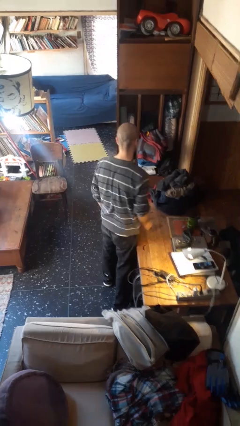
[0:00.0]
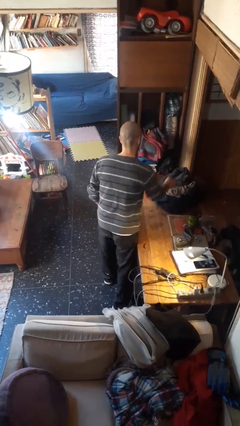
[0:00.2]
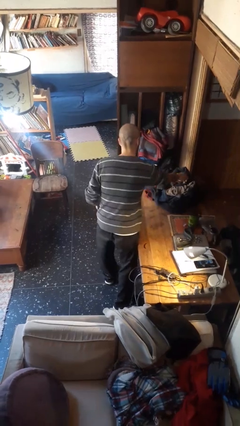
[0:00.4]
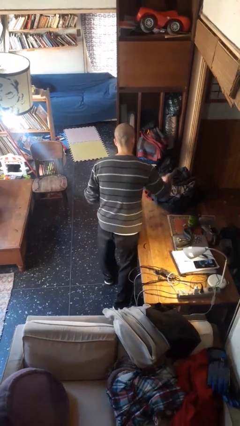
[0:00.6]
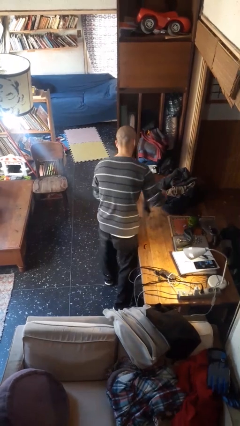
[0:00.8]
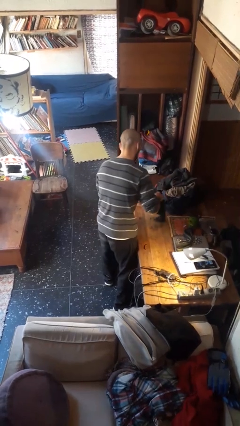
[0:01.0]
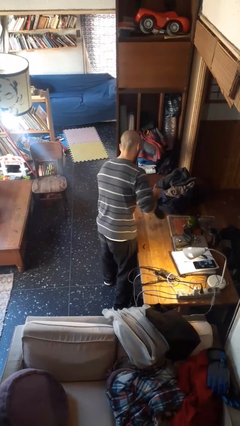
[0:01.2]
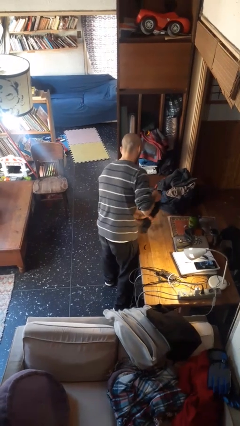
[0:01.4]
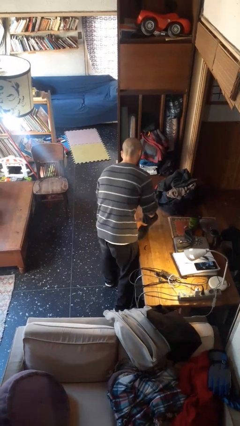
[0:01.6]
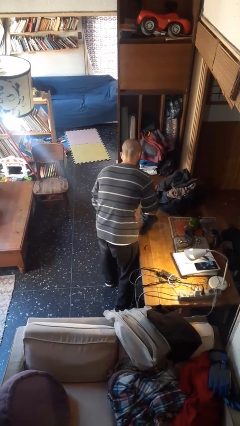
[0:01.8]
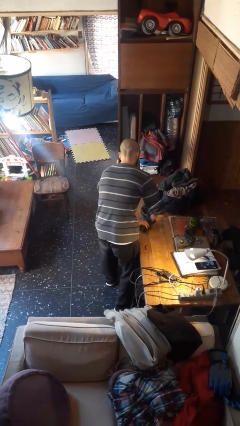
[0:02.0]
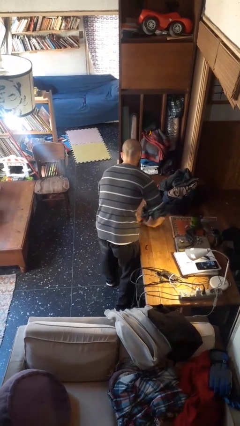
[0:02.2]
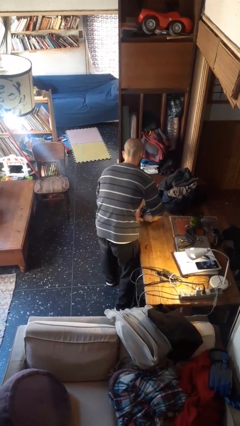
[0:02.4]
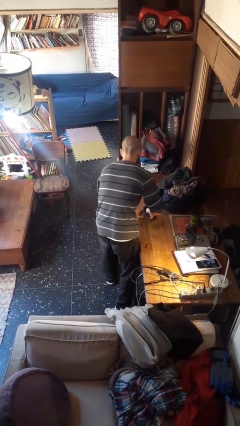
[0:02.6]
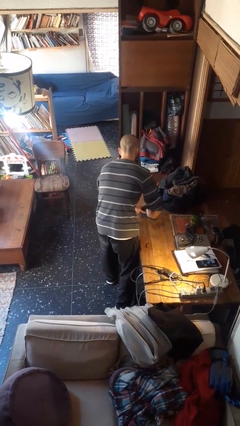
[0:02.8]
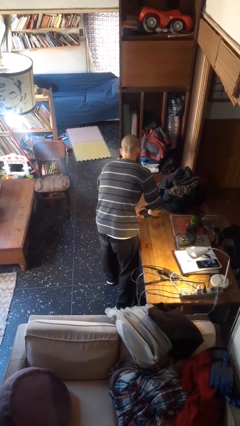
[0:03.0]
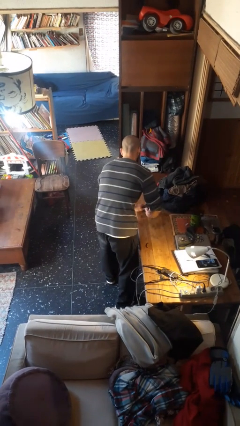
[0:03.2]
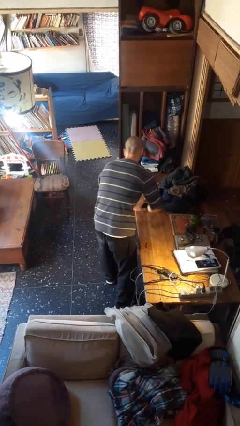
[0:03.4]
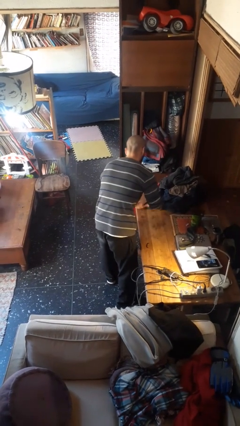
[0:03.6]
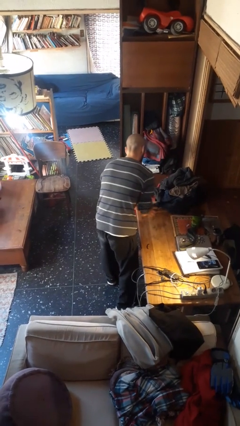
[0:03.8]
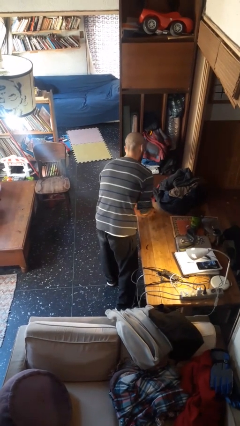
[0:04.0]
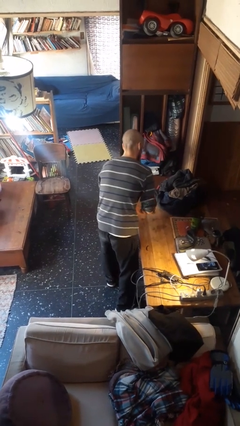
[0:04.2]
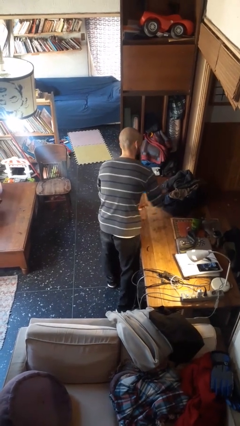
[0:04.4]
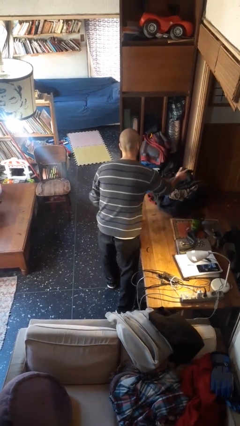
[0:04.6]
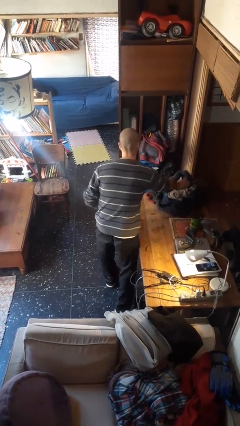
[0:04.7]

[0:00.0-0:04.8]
person folds socks

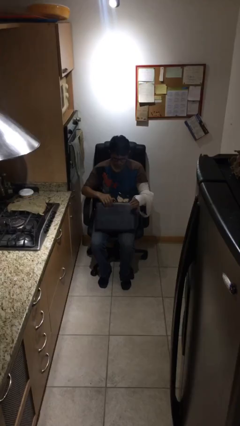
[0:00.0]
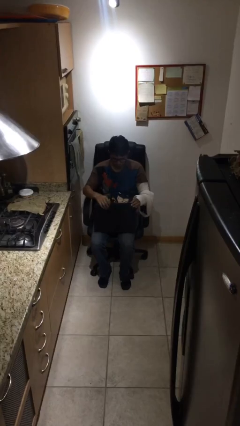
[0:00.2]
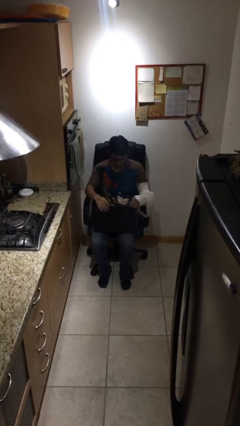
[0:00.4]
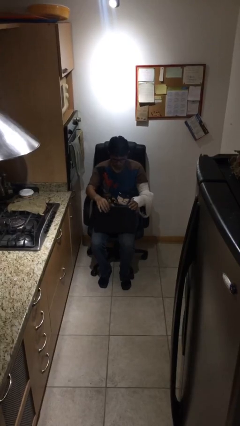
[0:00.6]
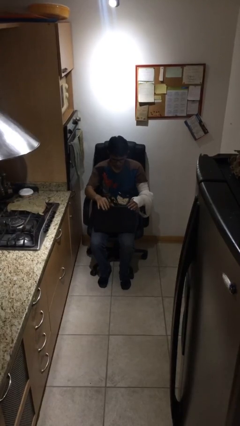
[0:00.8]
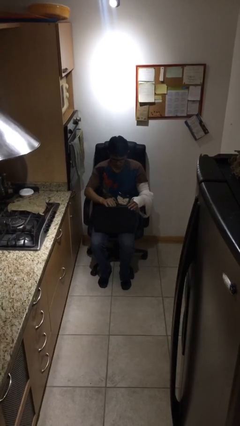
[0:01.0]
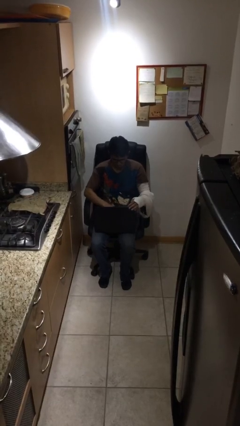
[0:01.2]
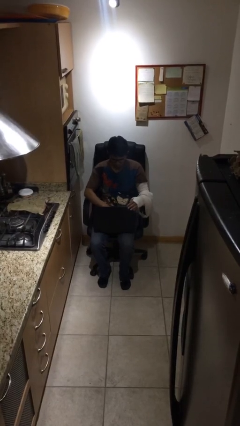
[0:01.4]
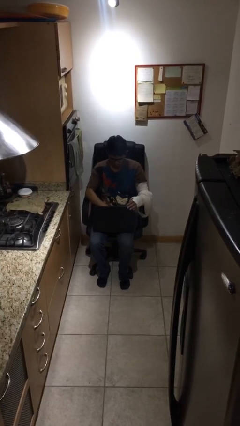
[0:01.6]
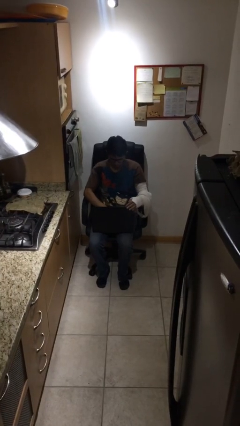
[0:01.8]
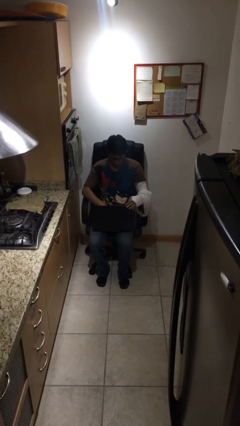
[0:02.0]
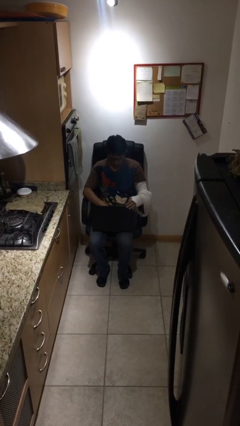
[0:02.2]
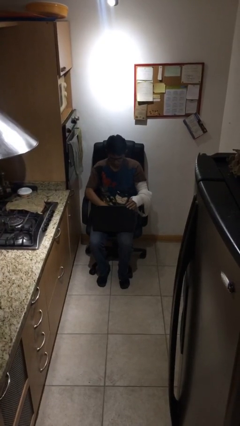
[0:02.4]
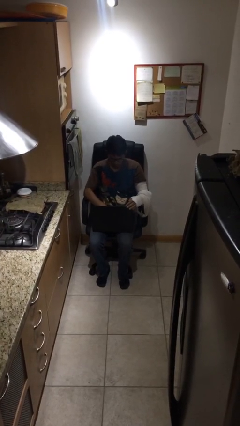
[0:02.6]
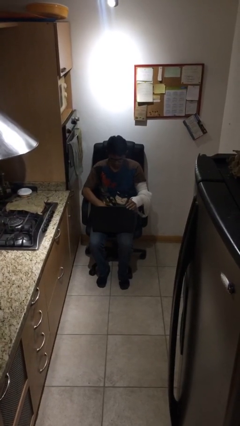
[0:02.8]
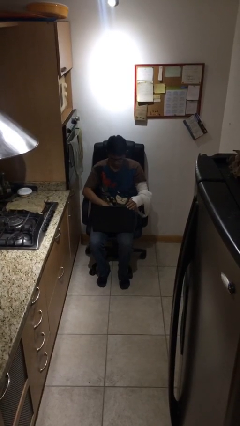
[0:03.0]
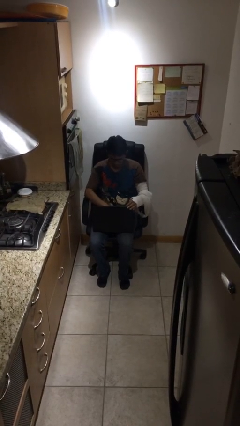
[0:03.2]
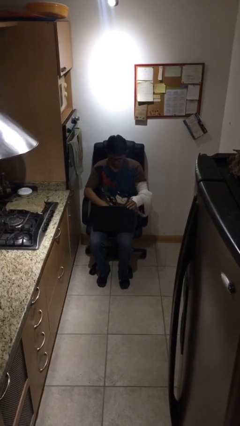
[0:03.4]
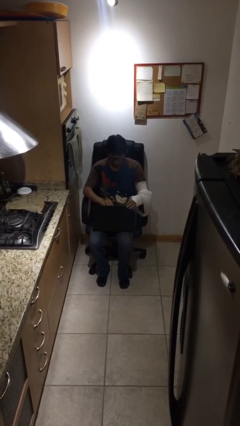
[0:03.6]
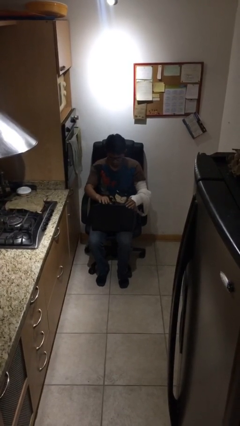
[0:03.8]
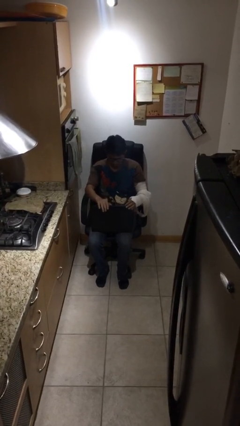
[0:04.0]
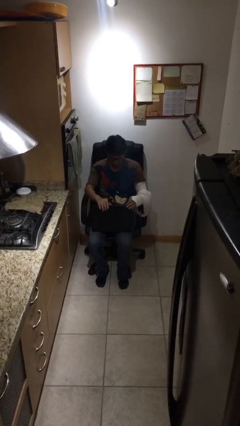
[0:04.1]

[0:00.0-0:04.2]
person interacts with laptop

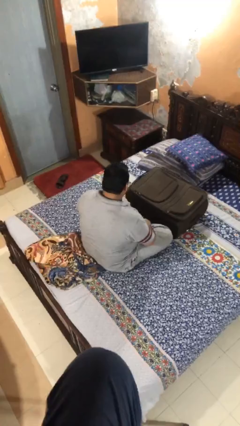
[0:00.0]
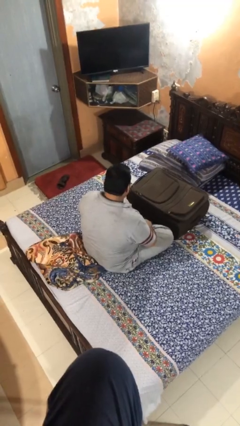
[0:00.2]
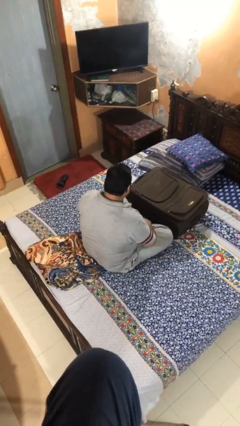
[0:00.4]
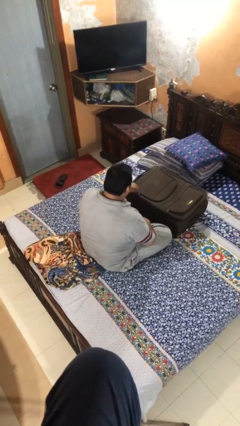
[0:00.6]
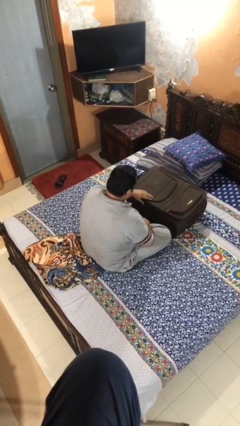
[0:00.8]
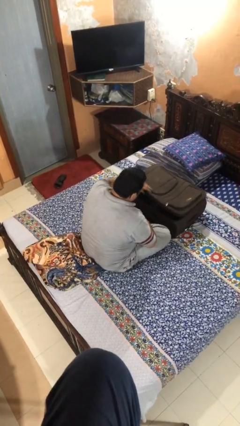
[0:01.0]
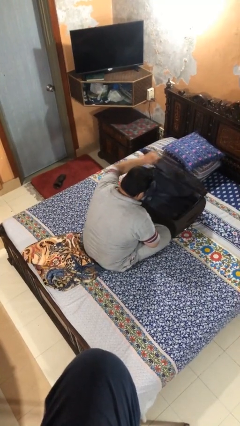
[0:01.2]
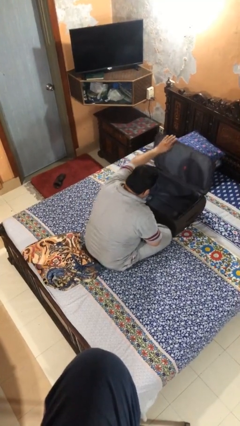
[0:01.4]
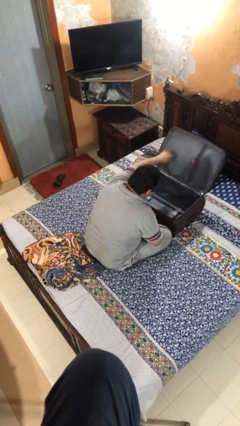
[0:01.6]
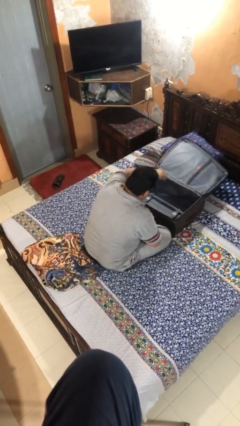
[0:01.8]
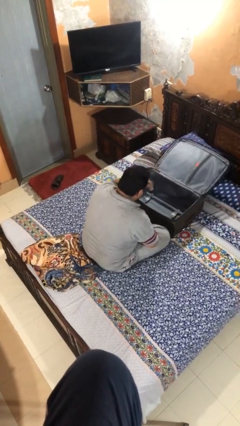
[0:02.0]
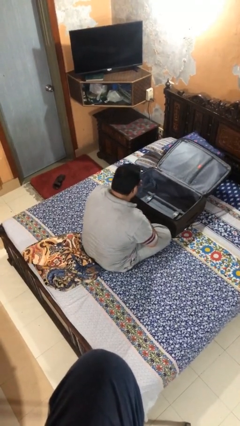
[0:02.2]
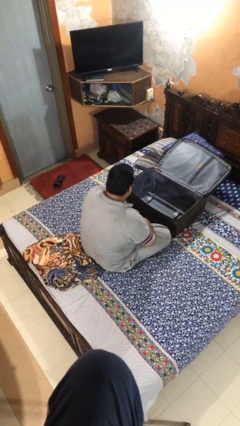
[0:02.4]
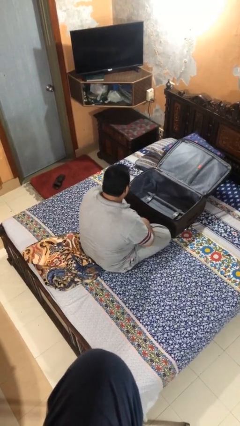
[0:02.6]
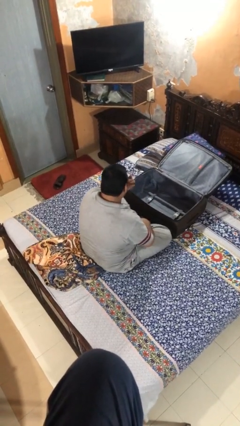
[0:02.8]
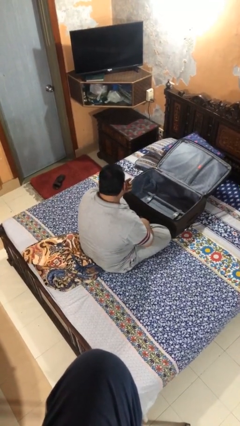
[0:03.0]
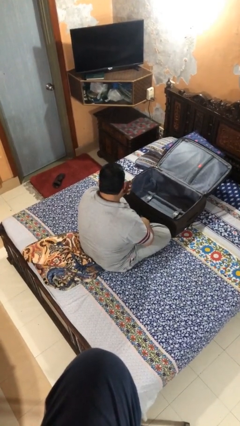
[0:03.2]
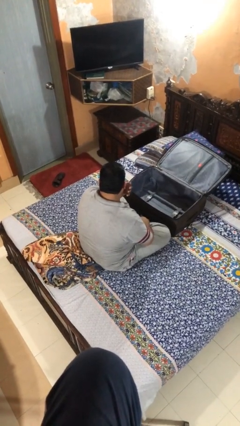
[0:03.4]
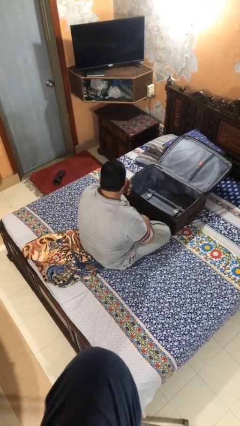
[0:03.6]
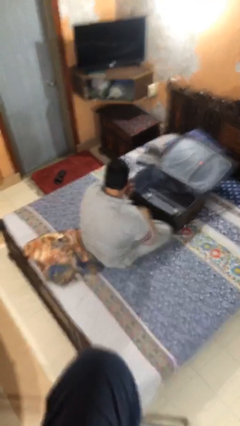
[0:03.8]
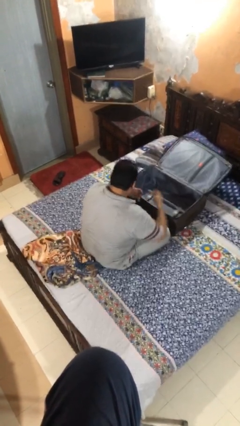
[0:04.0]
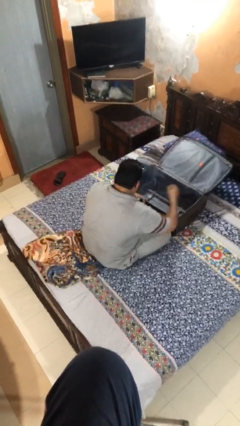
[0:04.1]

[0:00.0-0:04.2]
person opens suitcase

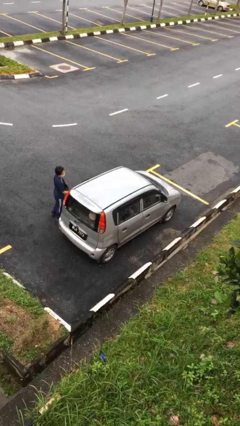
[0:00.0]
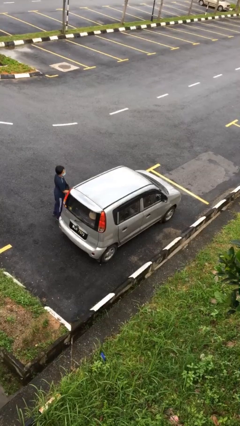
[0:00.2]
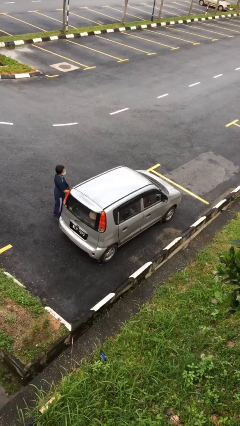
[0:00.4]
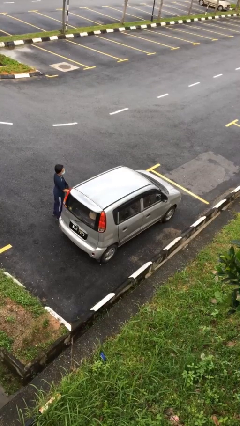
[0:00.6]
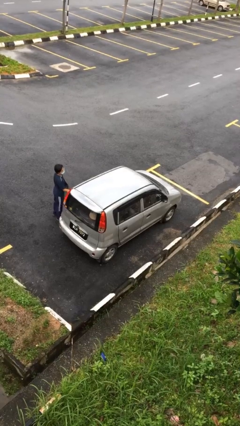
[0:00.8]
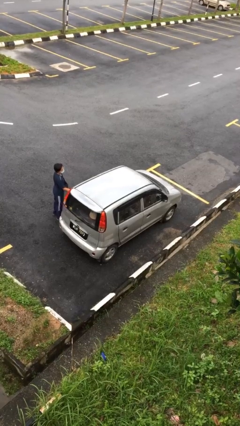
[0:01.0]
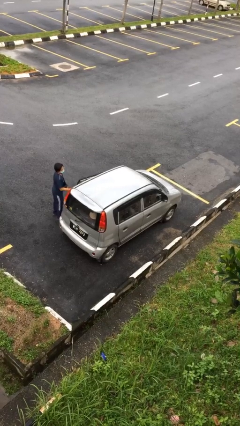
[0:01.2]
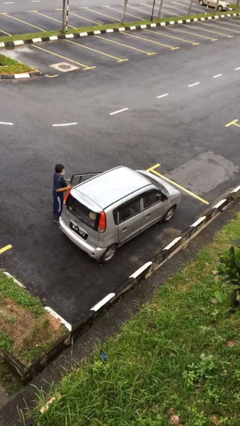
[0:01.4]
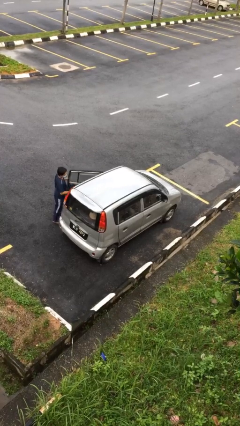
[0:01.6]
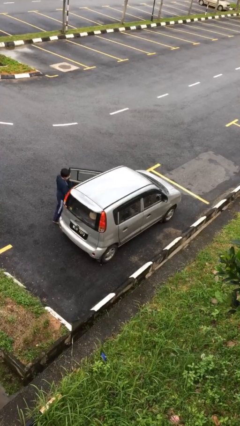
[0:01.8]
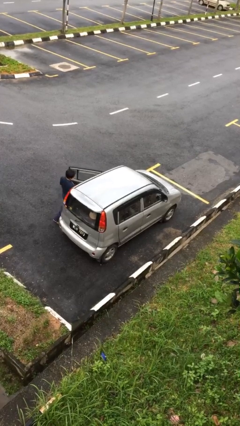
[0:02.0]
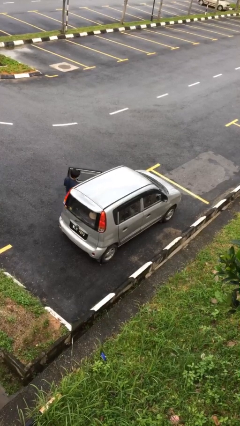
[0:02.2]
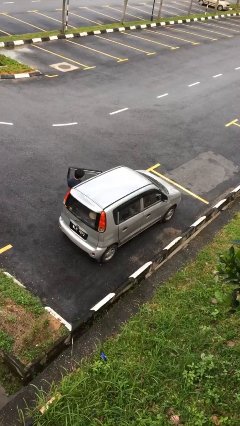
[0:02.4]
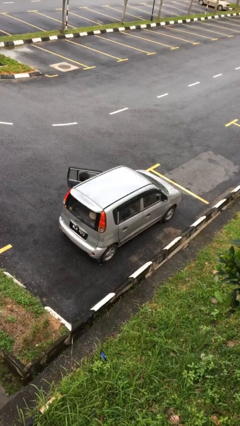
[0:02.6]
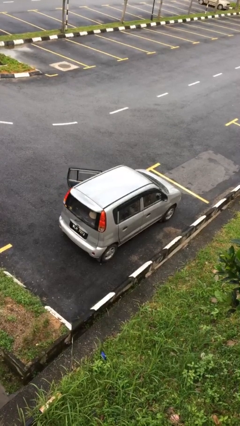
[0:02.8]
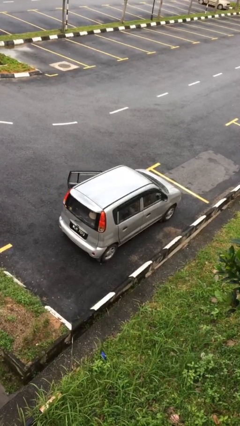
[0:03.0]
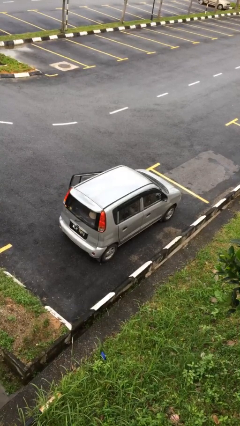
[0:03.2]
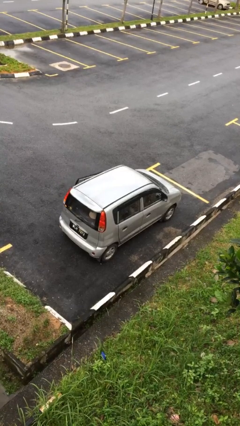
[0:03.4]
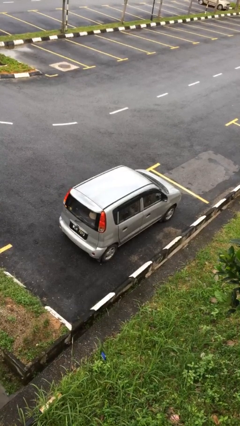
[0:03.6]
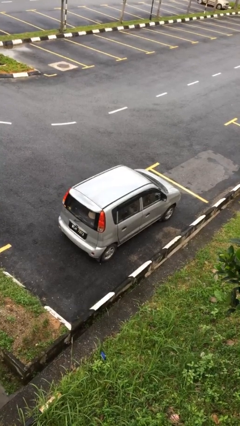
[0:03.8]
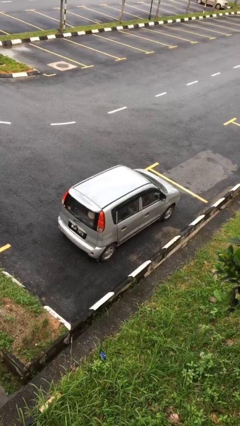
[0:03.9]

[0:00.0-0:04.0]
car picks up person

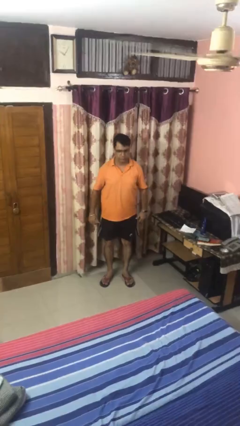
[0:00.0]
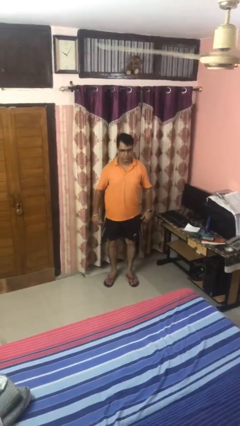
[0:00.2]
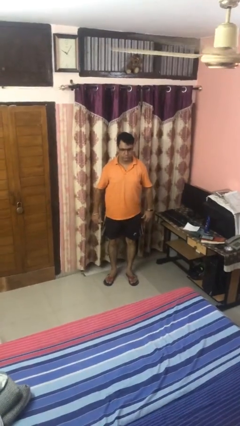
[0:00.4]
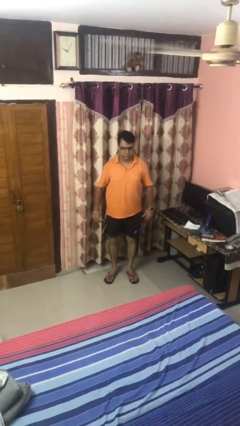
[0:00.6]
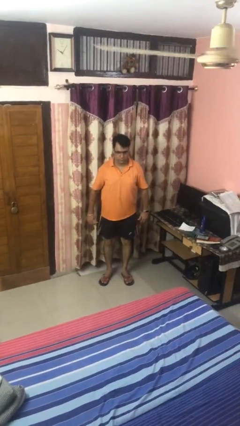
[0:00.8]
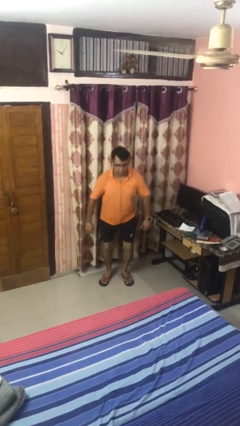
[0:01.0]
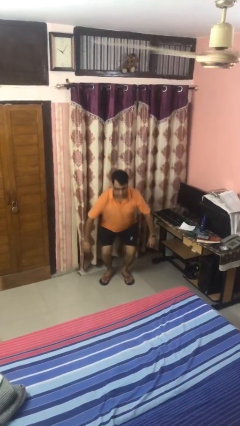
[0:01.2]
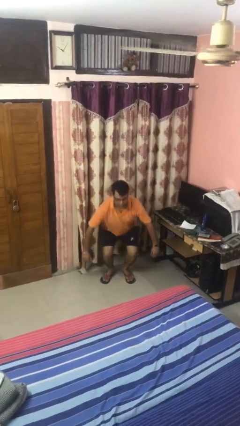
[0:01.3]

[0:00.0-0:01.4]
person squats
